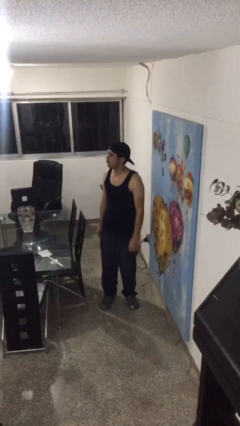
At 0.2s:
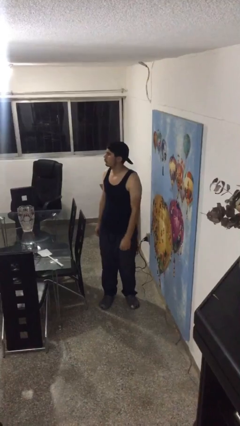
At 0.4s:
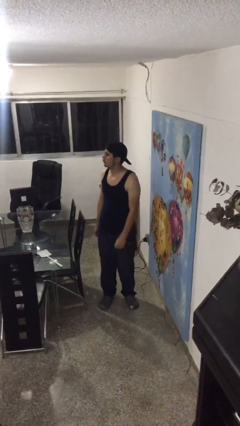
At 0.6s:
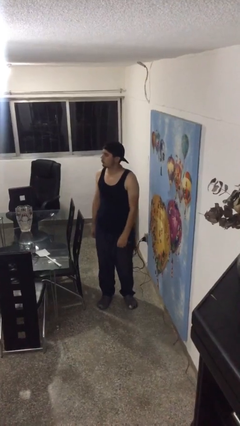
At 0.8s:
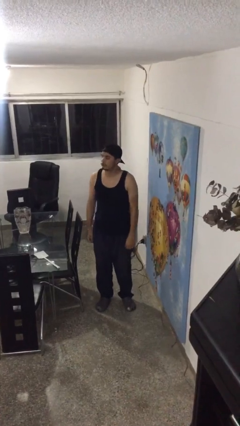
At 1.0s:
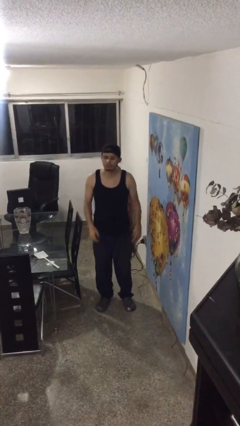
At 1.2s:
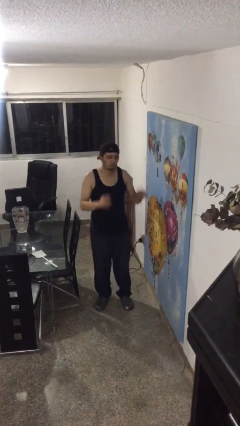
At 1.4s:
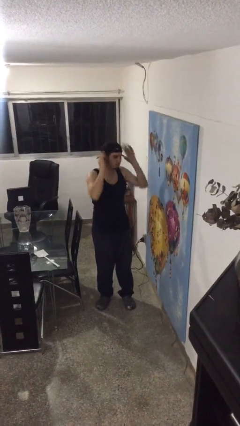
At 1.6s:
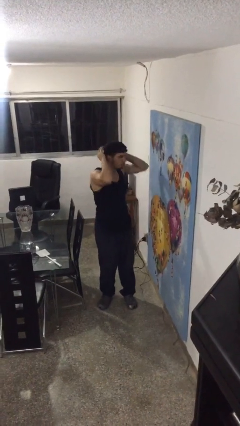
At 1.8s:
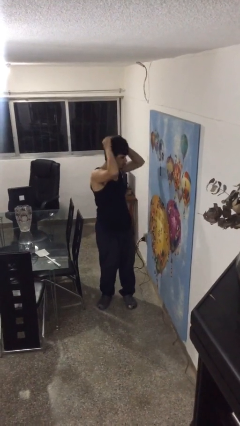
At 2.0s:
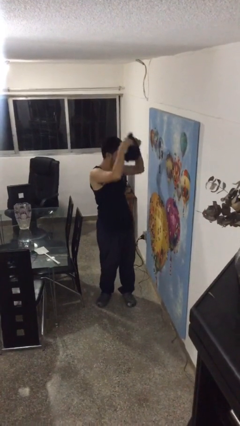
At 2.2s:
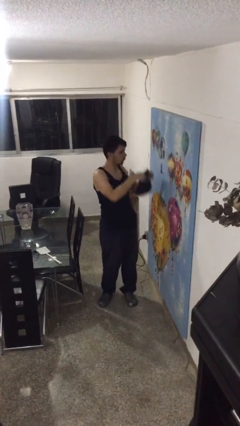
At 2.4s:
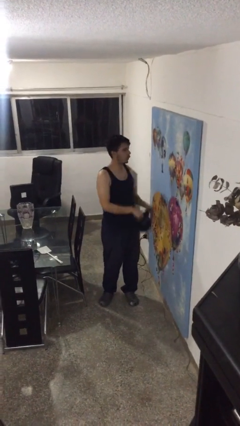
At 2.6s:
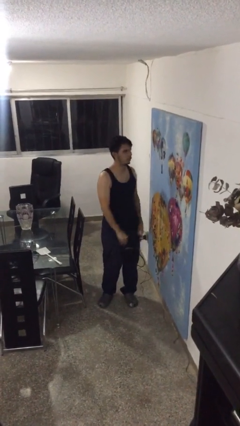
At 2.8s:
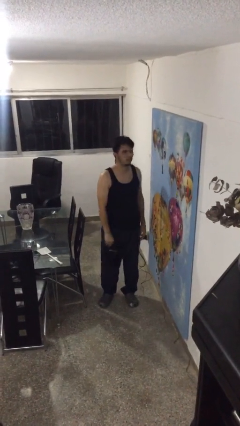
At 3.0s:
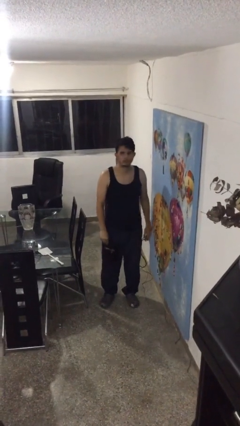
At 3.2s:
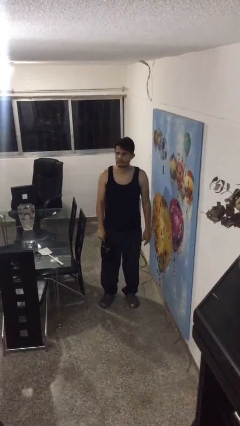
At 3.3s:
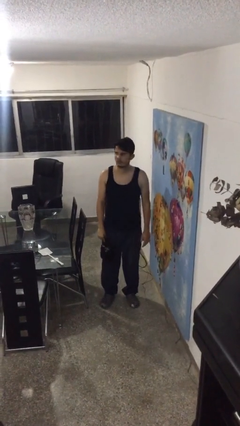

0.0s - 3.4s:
person takes off hat

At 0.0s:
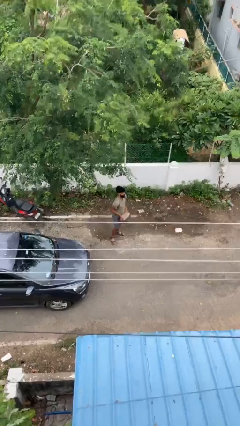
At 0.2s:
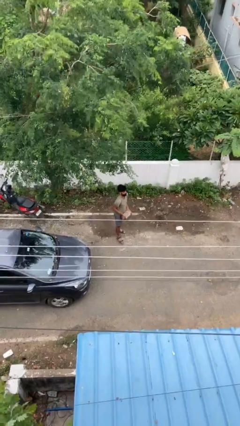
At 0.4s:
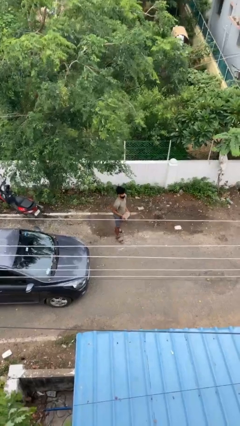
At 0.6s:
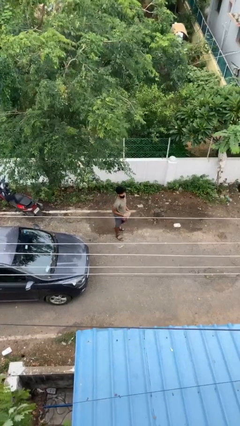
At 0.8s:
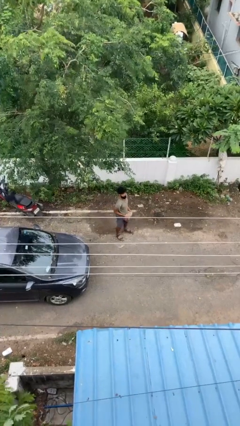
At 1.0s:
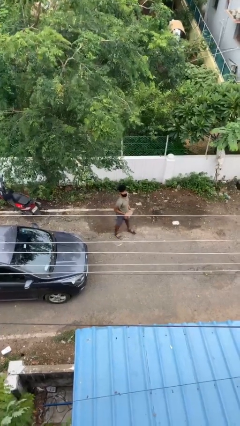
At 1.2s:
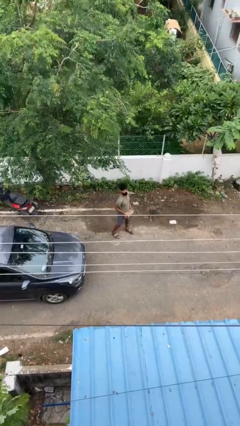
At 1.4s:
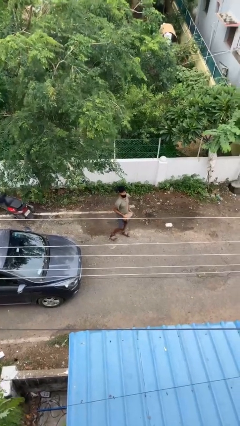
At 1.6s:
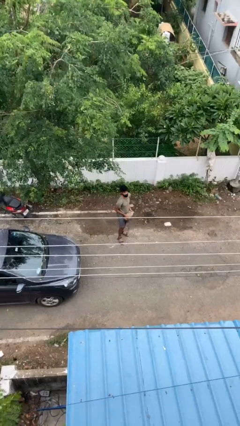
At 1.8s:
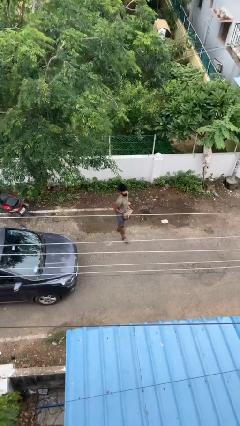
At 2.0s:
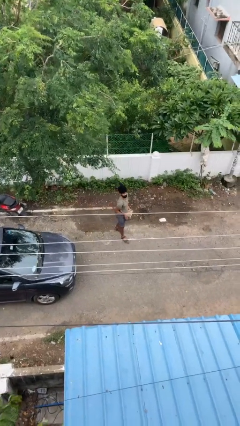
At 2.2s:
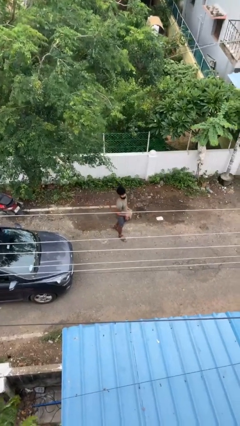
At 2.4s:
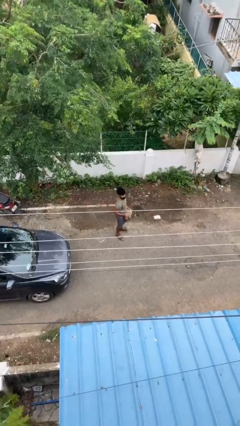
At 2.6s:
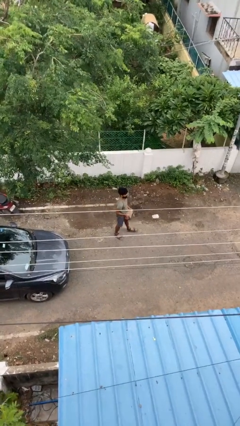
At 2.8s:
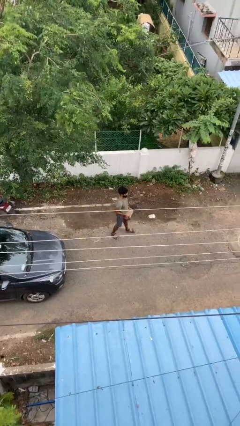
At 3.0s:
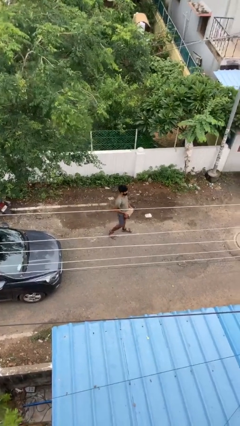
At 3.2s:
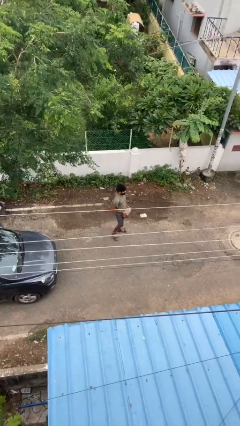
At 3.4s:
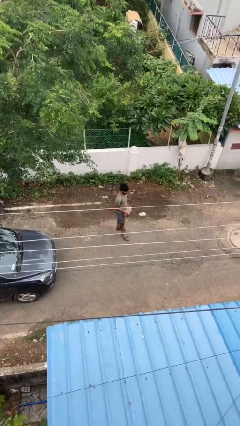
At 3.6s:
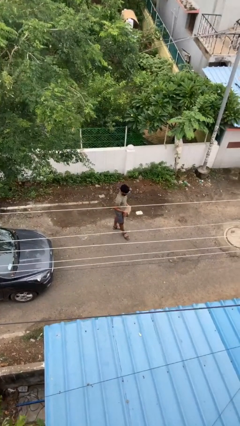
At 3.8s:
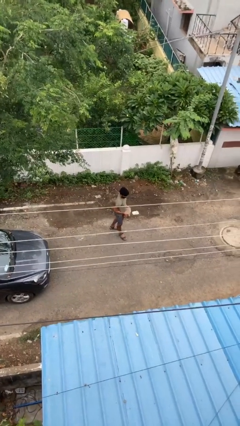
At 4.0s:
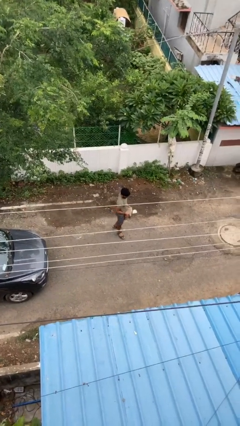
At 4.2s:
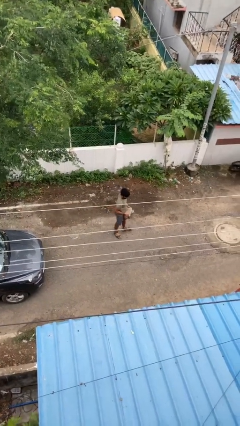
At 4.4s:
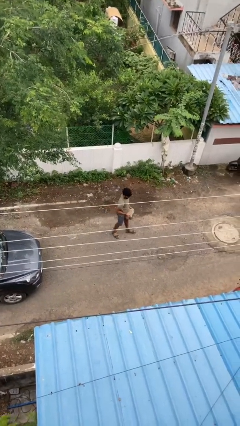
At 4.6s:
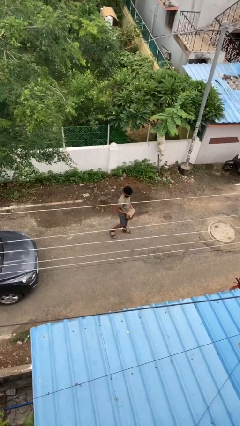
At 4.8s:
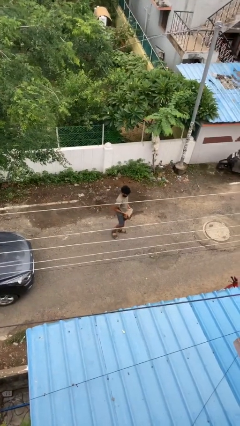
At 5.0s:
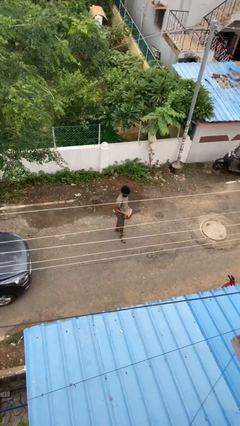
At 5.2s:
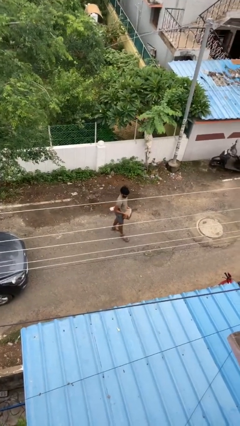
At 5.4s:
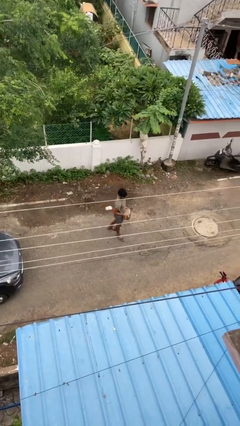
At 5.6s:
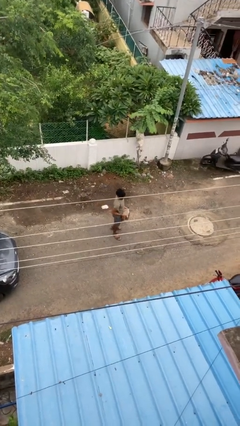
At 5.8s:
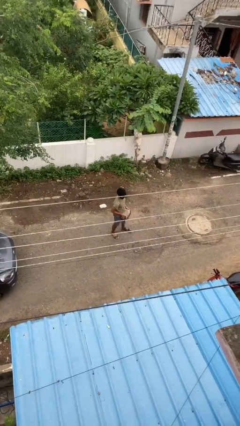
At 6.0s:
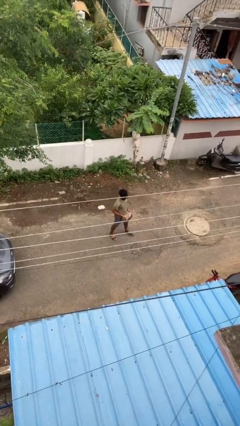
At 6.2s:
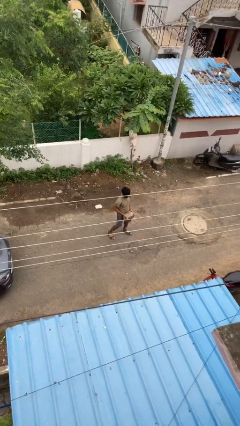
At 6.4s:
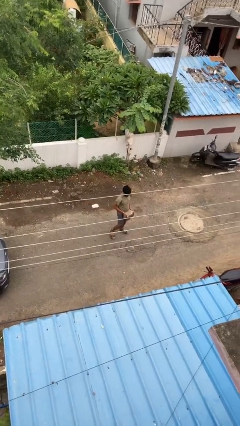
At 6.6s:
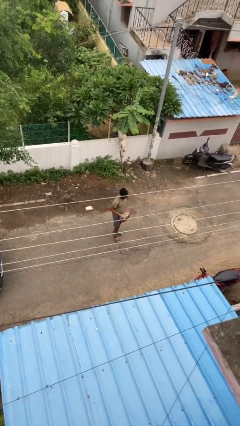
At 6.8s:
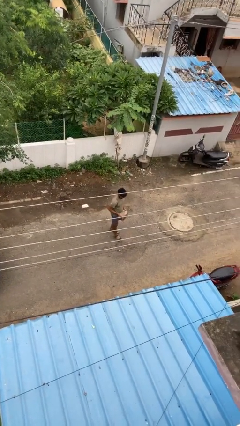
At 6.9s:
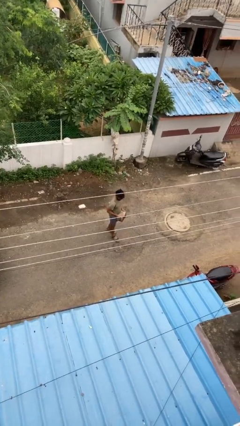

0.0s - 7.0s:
person carries heavy object

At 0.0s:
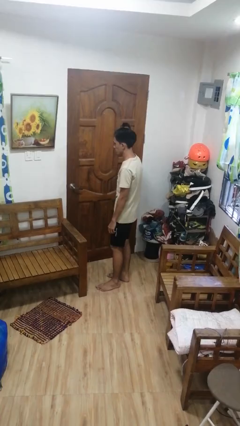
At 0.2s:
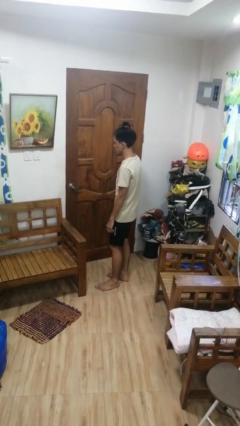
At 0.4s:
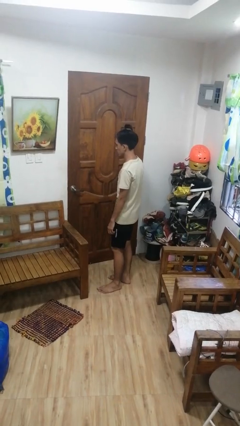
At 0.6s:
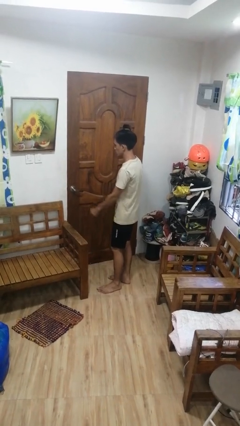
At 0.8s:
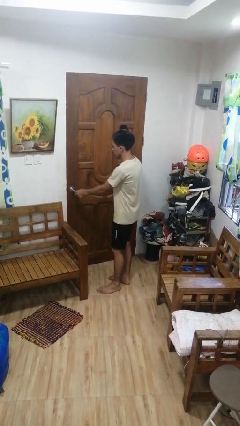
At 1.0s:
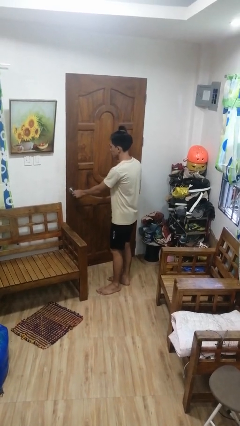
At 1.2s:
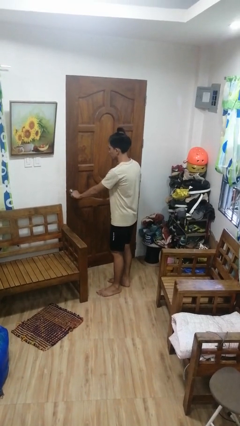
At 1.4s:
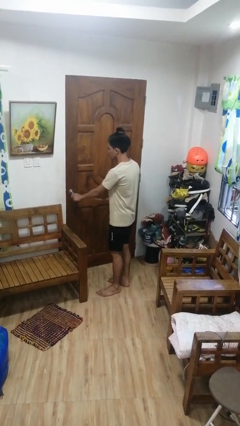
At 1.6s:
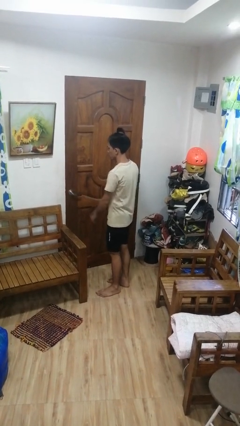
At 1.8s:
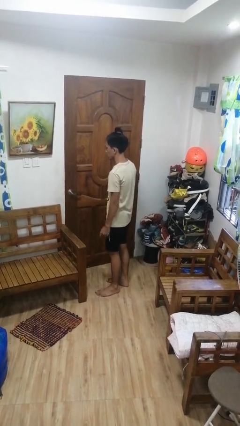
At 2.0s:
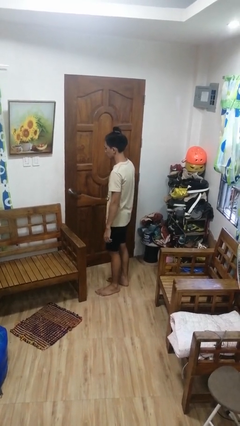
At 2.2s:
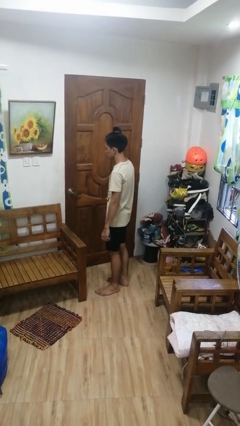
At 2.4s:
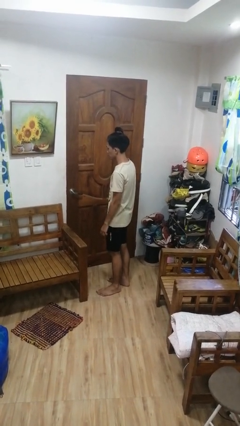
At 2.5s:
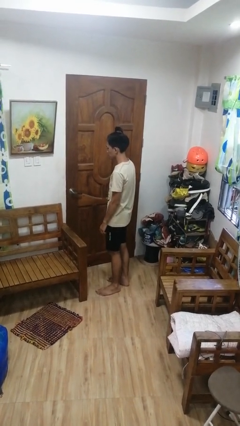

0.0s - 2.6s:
person unlocks door with keys

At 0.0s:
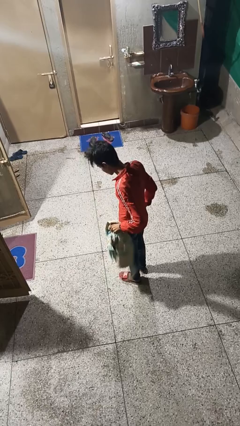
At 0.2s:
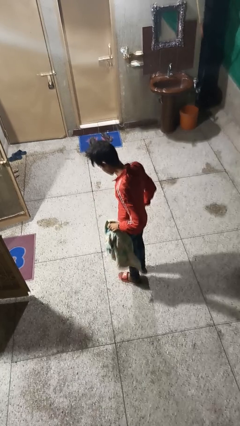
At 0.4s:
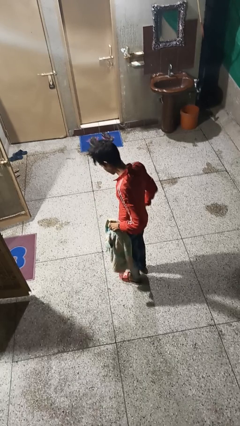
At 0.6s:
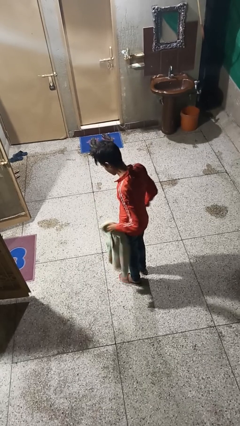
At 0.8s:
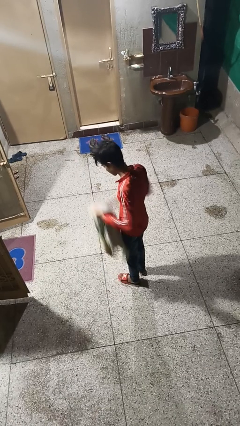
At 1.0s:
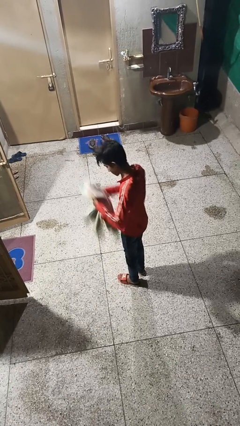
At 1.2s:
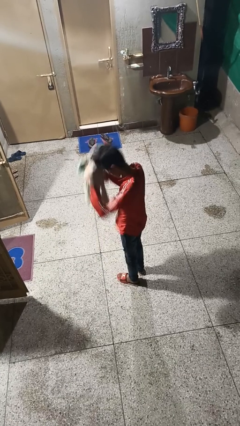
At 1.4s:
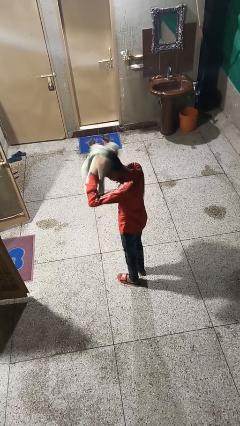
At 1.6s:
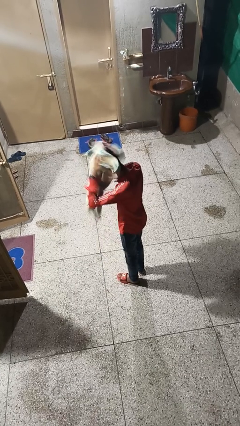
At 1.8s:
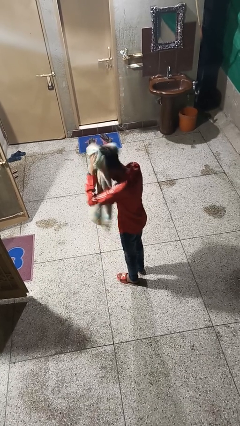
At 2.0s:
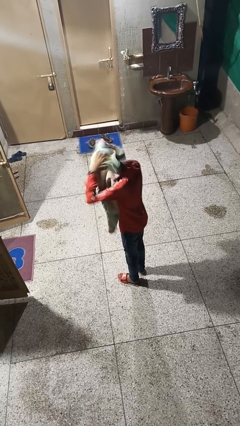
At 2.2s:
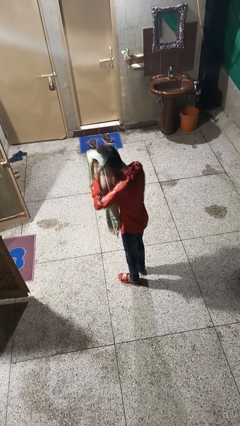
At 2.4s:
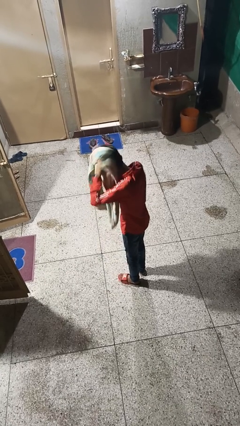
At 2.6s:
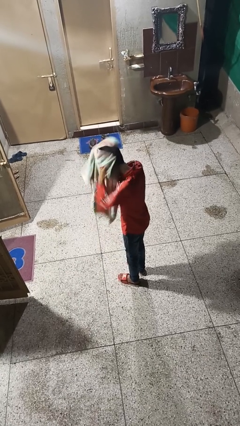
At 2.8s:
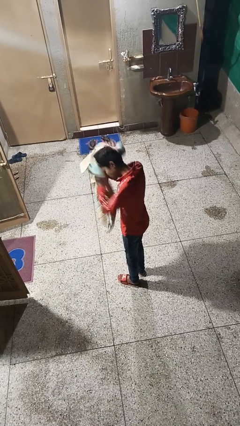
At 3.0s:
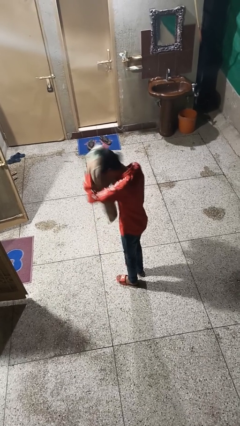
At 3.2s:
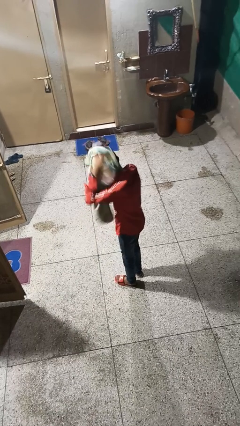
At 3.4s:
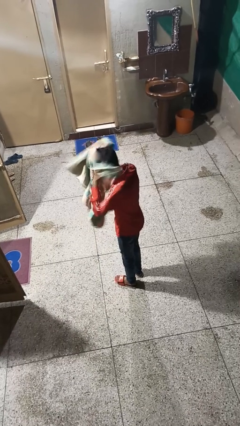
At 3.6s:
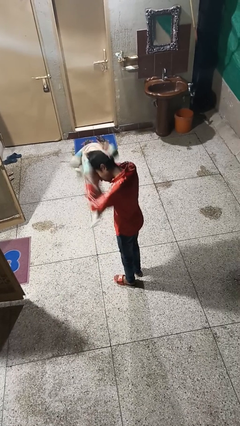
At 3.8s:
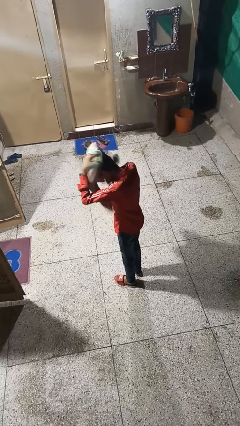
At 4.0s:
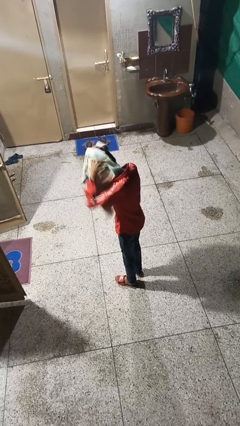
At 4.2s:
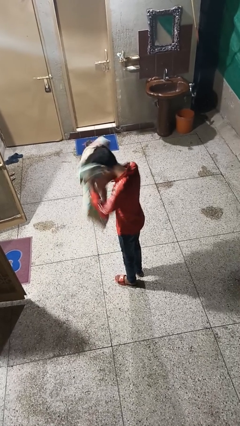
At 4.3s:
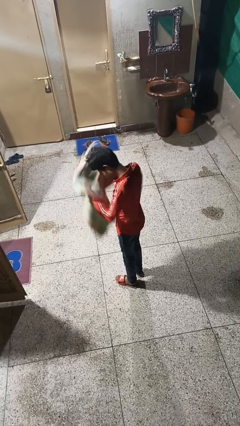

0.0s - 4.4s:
person dries hair with towel

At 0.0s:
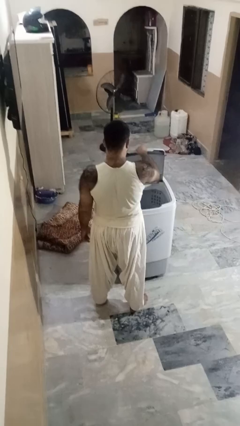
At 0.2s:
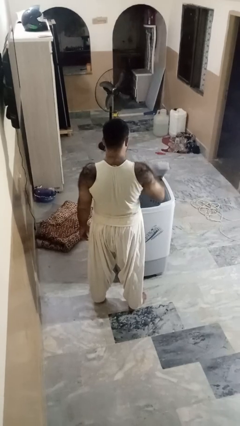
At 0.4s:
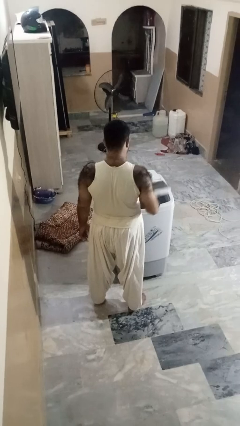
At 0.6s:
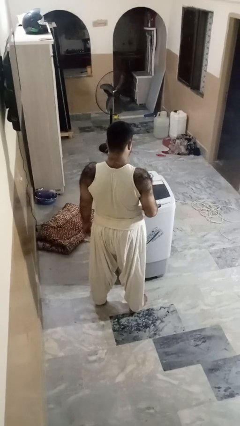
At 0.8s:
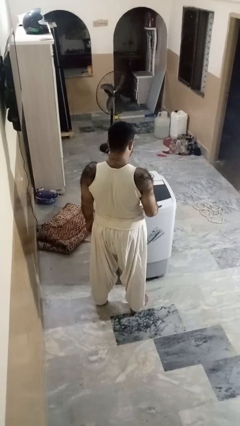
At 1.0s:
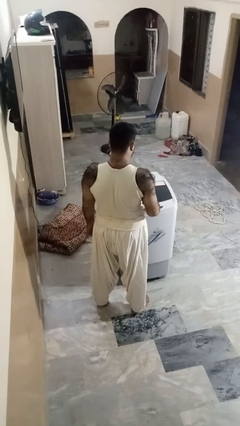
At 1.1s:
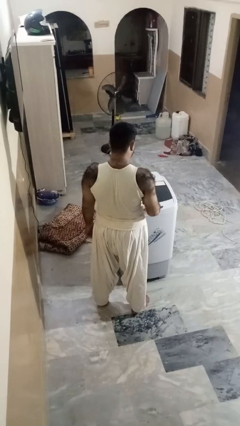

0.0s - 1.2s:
person closes clothes washer
